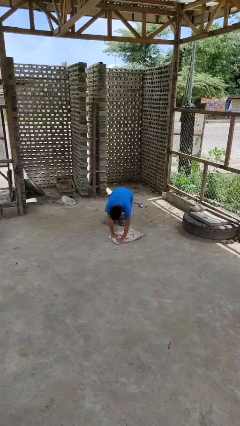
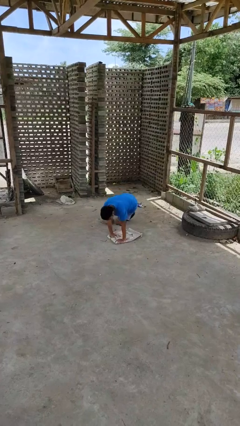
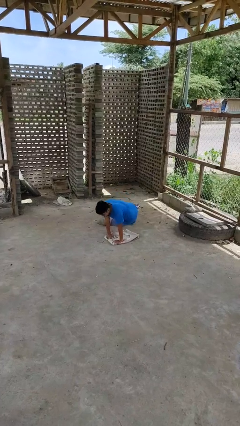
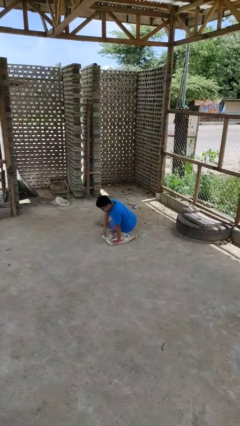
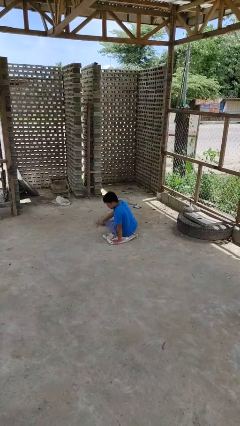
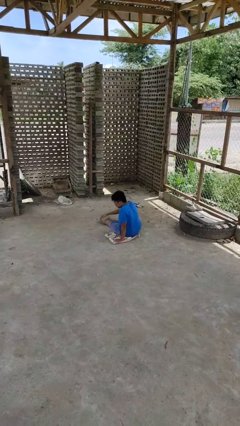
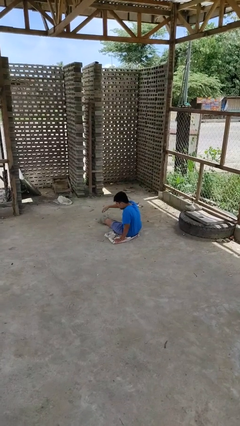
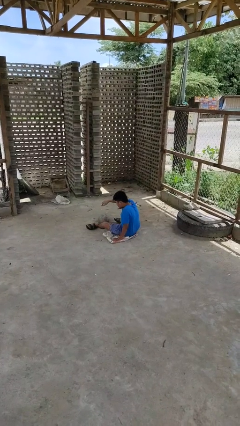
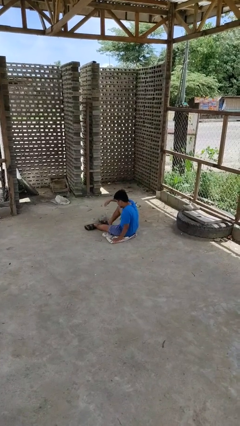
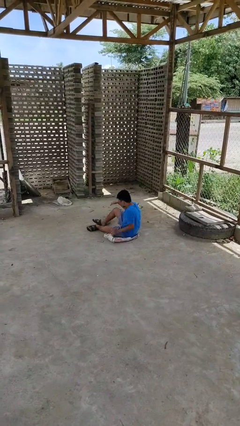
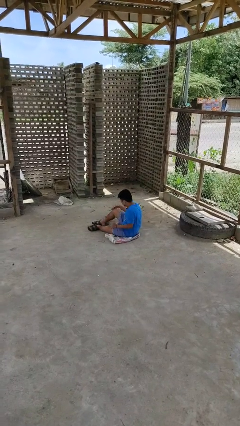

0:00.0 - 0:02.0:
person lies down on floor

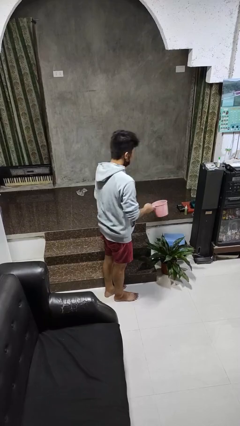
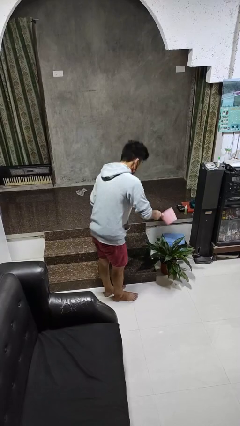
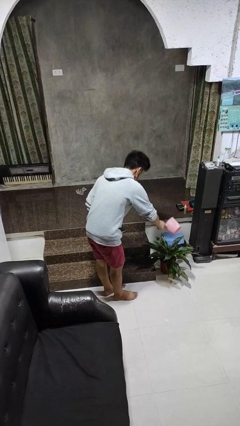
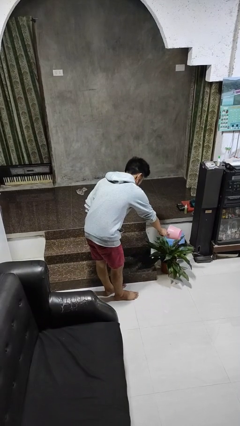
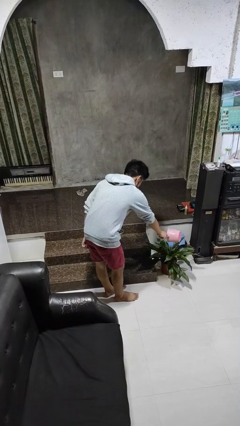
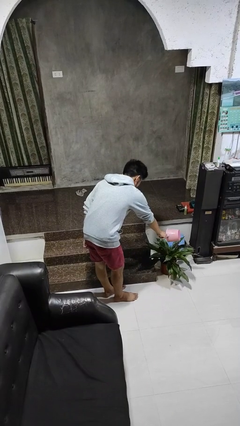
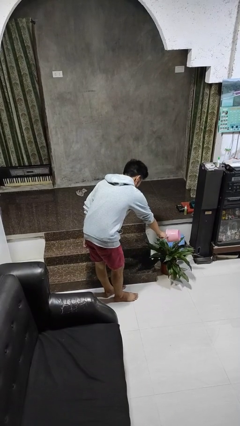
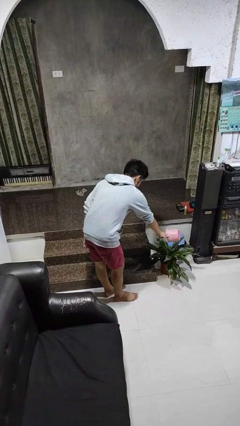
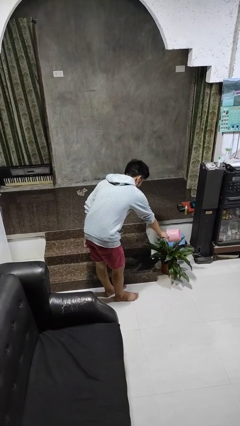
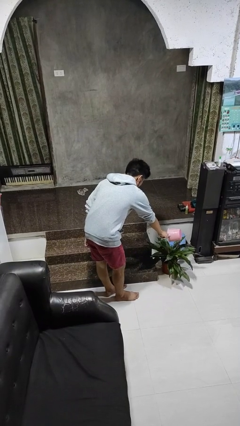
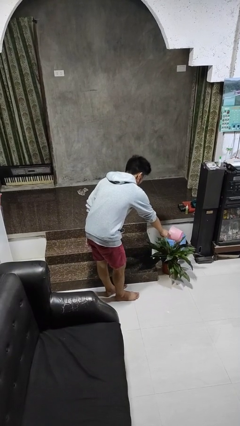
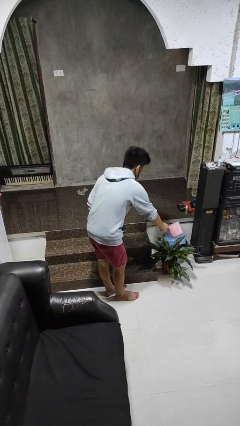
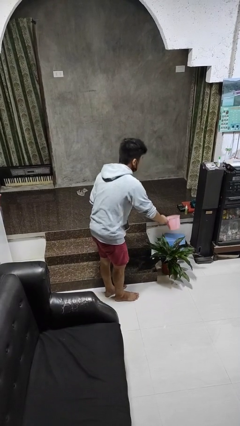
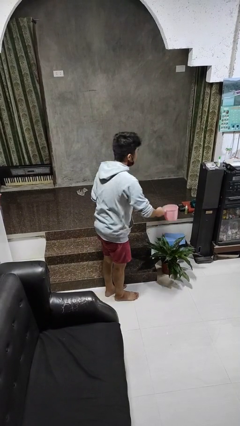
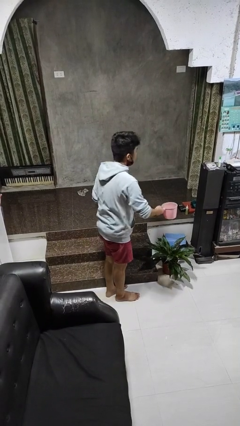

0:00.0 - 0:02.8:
person waters houseplant

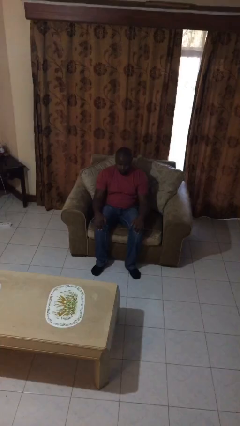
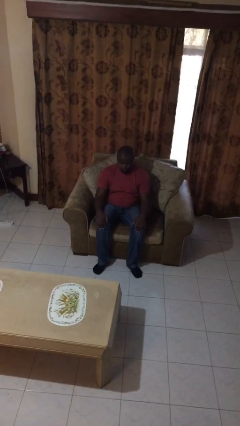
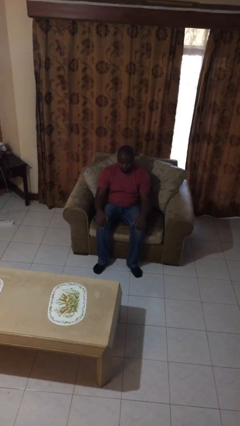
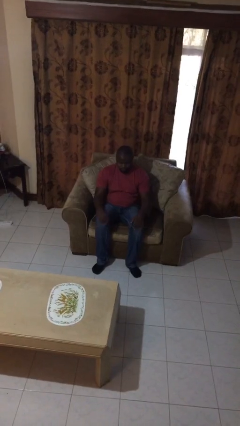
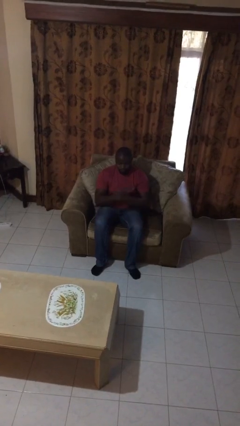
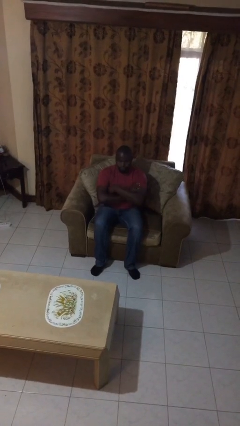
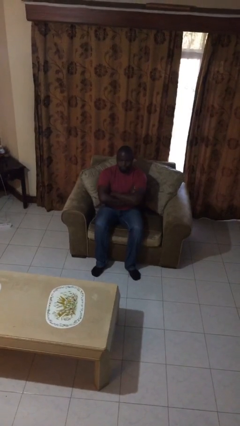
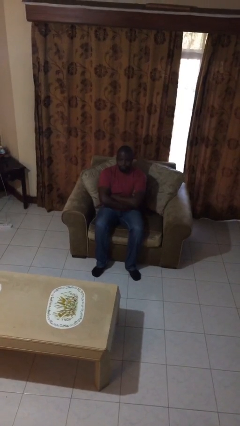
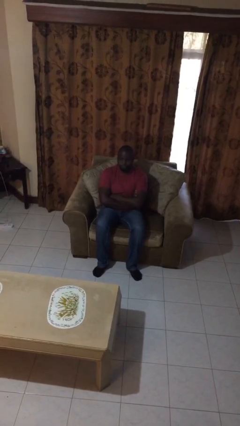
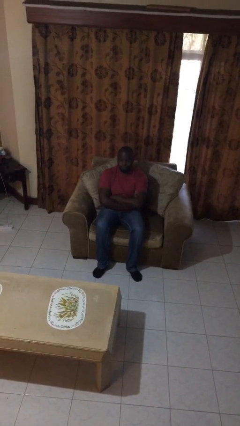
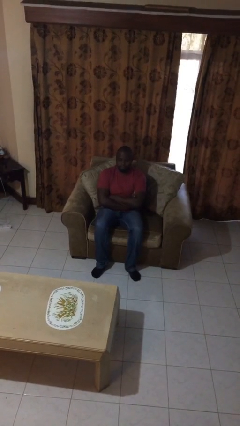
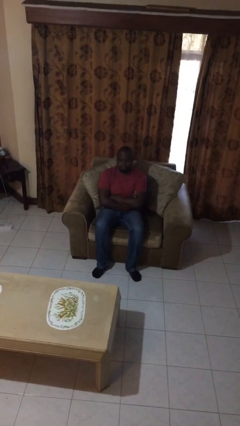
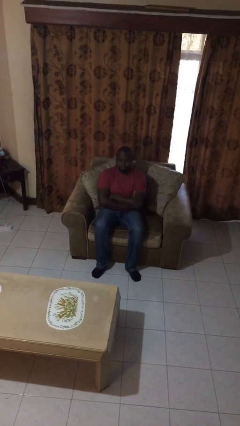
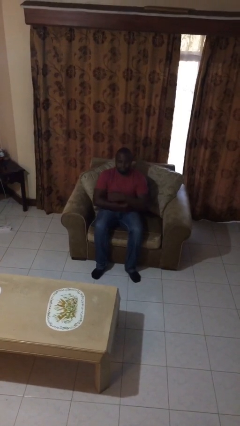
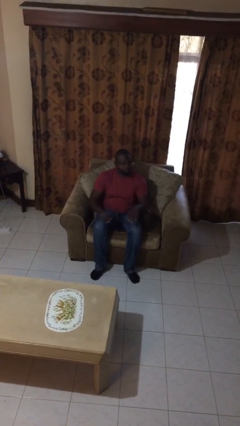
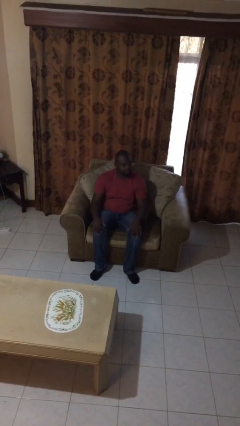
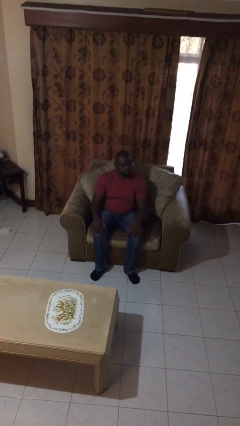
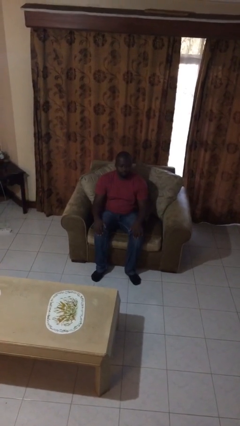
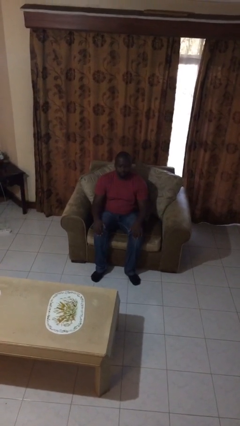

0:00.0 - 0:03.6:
person crosses arms

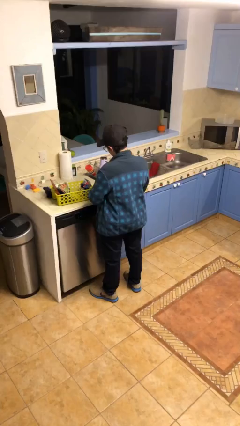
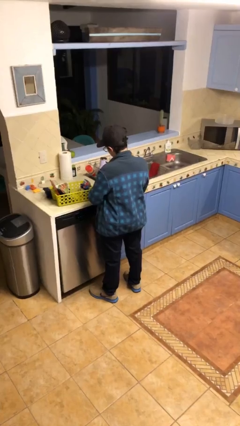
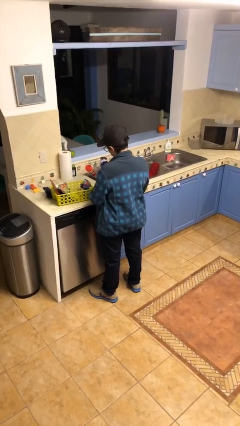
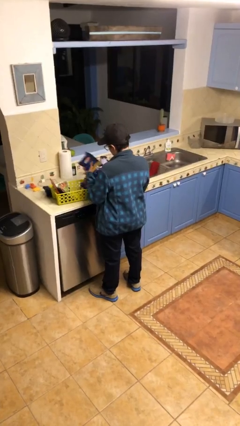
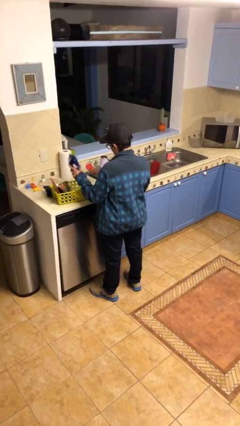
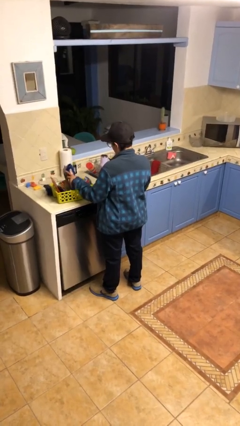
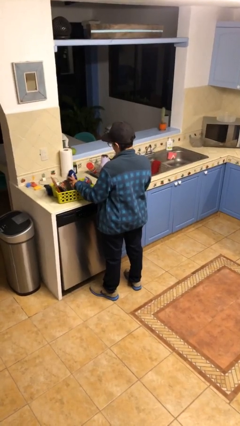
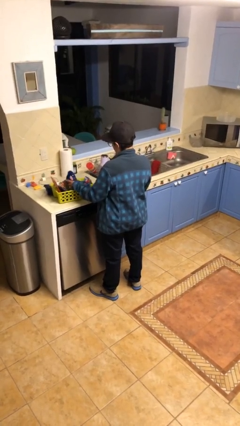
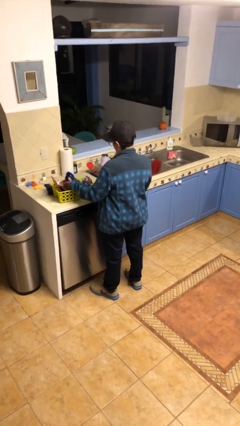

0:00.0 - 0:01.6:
person puts object into basket

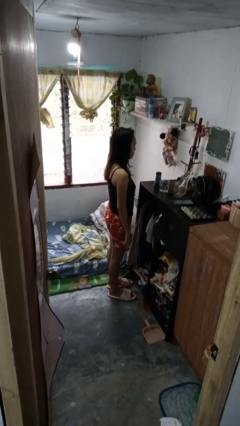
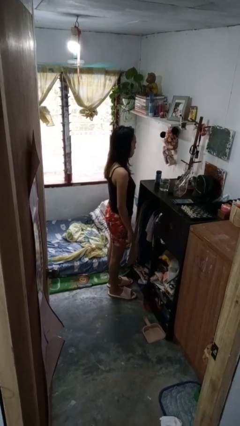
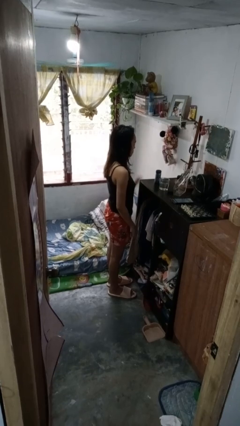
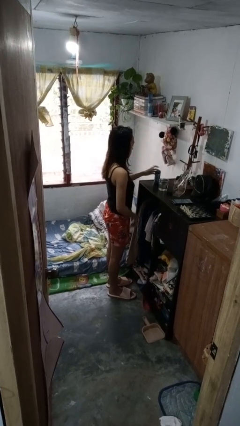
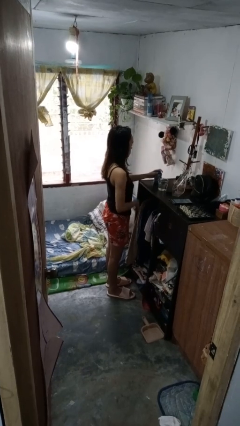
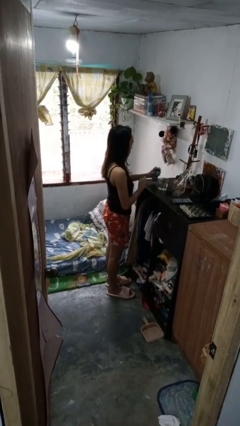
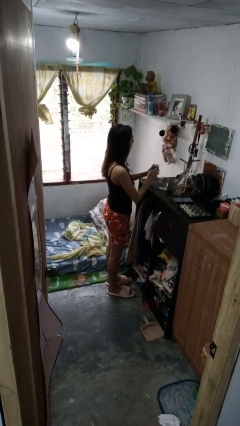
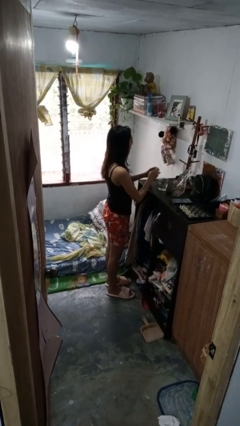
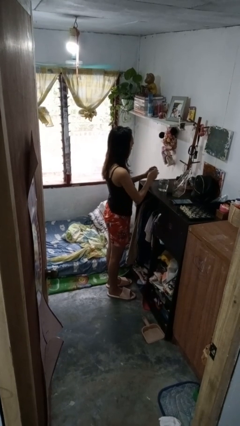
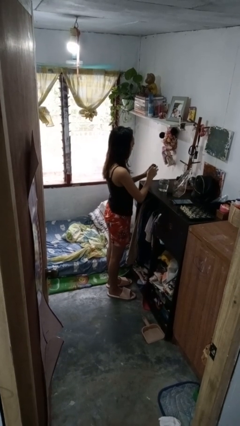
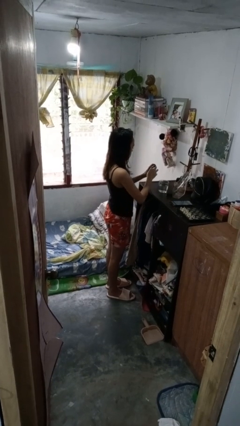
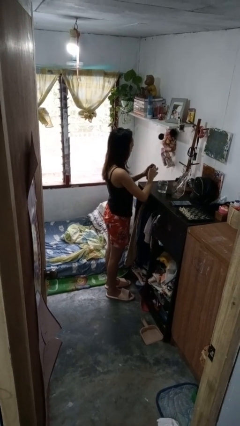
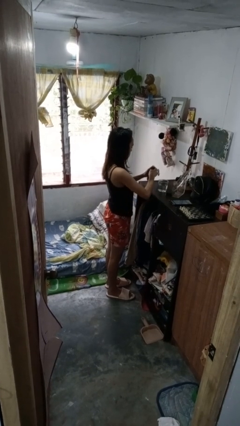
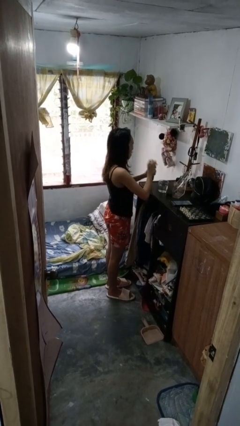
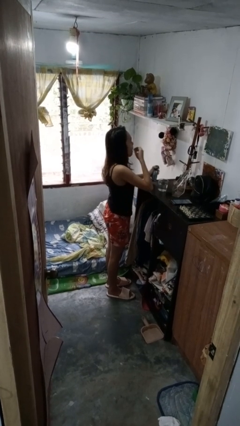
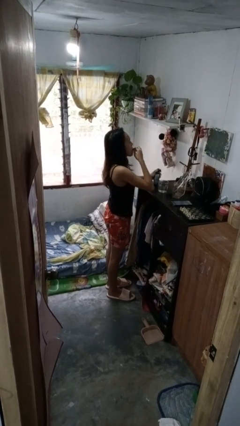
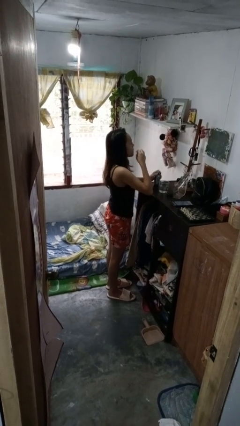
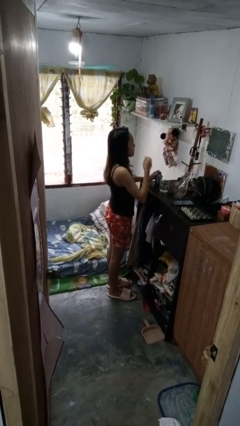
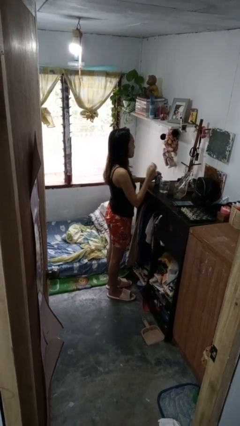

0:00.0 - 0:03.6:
person takes medicine pills

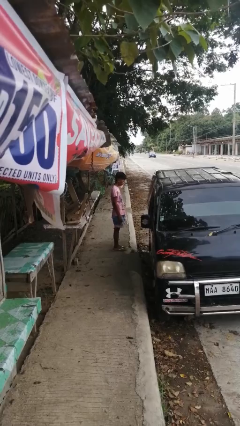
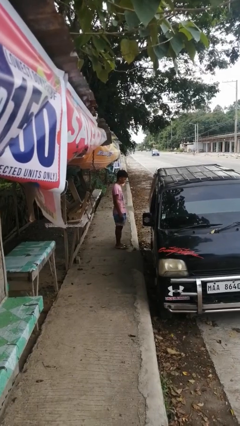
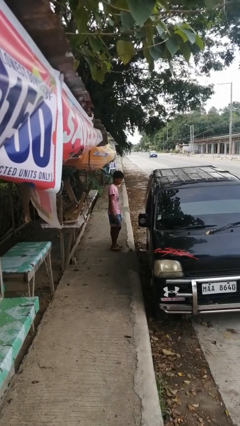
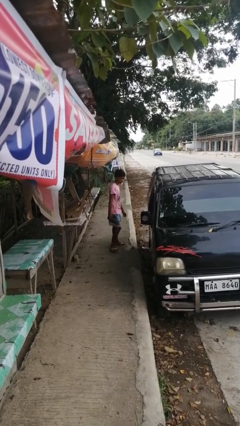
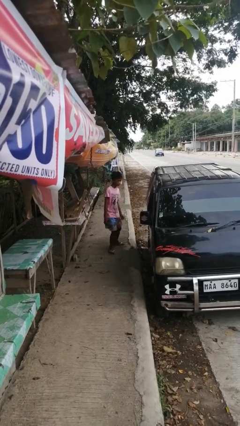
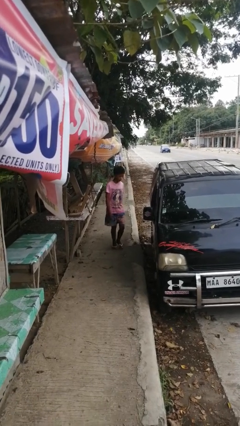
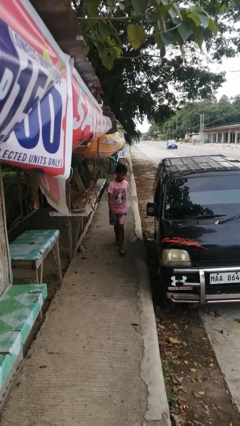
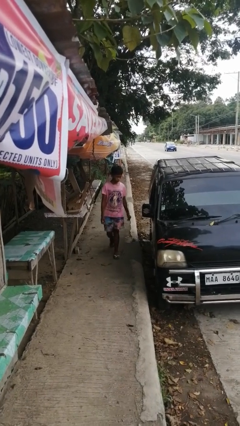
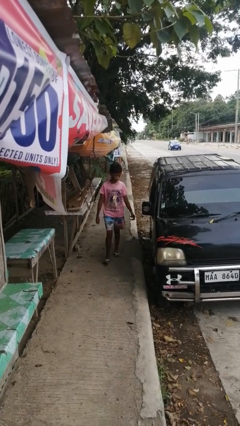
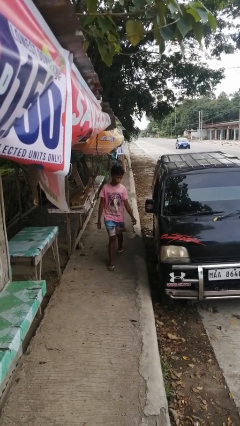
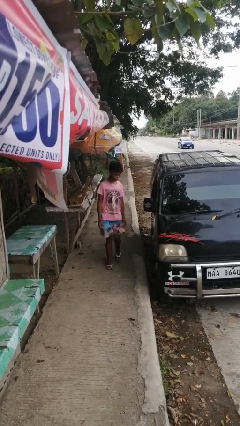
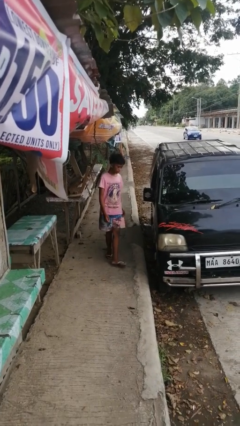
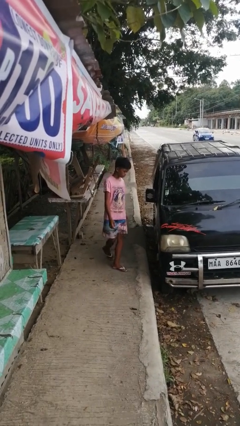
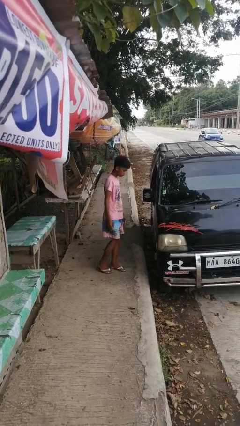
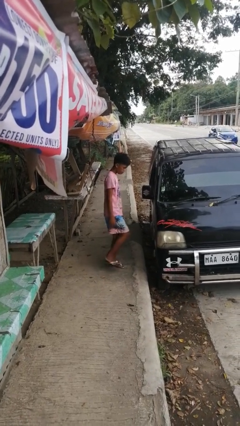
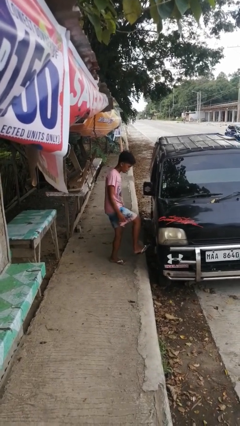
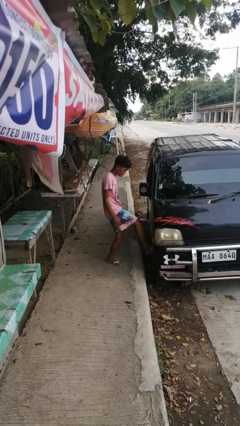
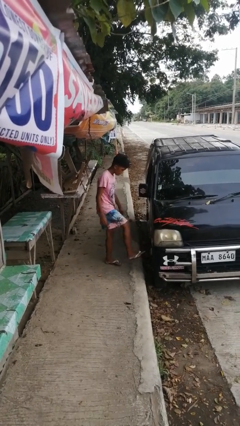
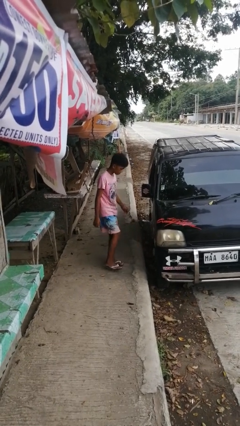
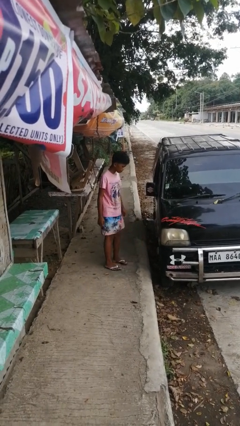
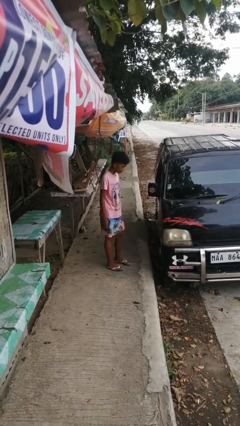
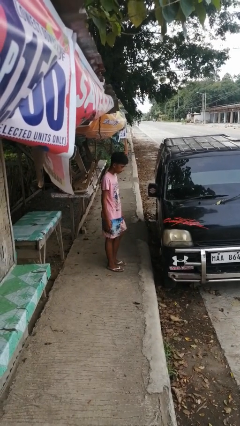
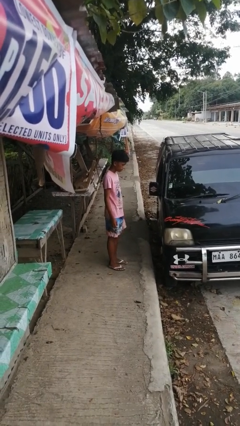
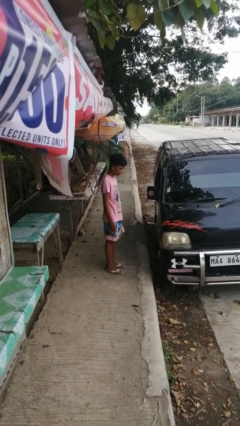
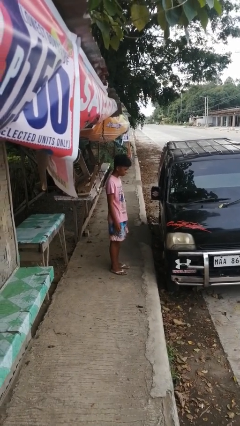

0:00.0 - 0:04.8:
person kicks car tires
